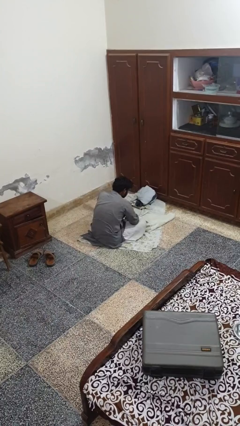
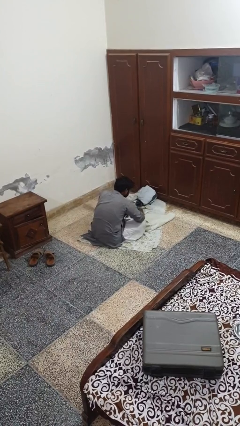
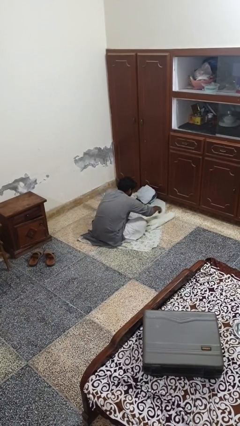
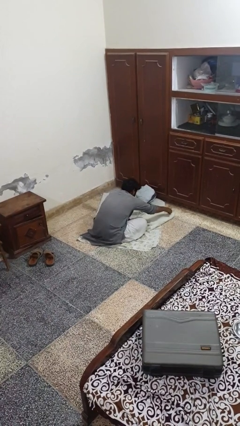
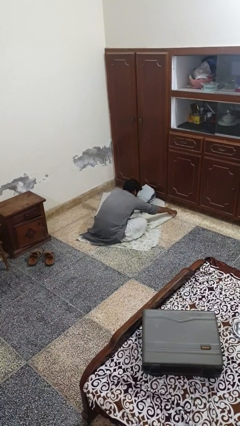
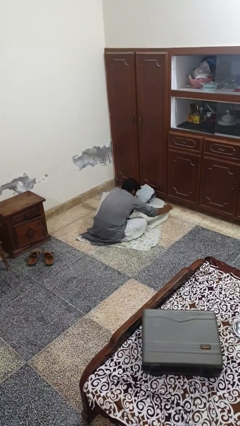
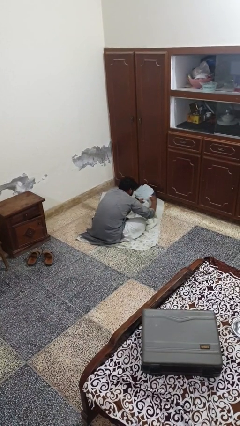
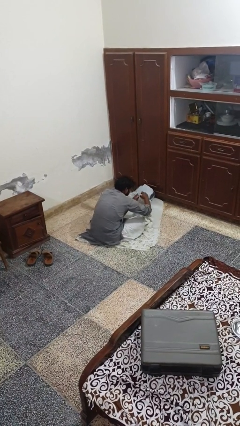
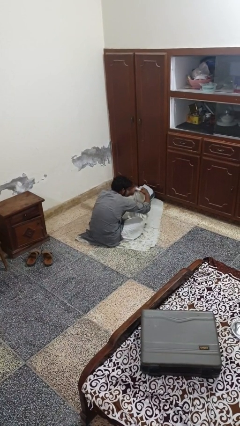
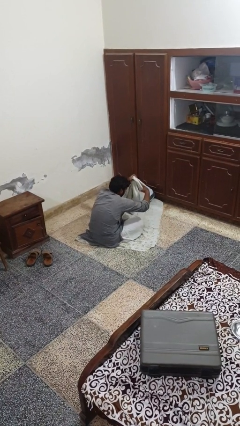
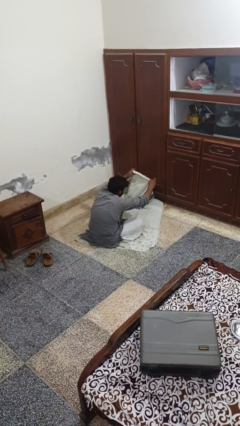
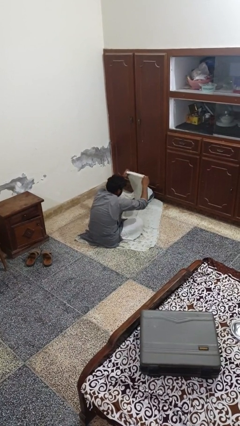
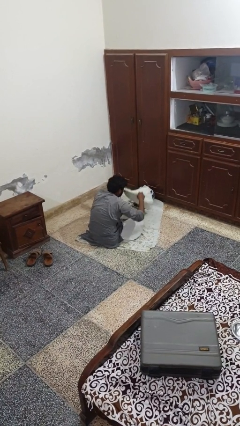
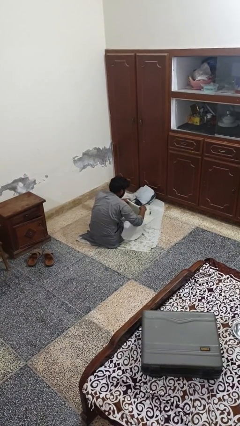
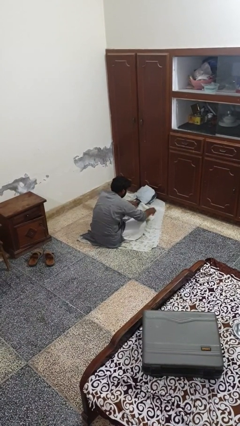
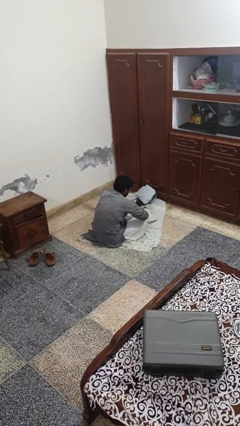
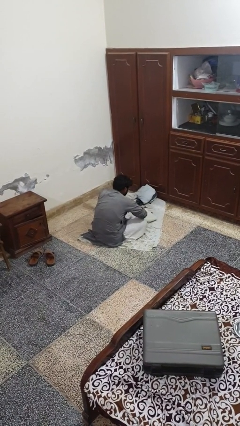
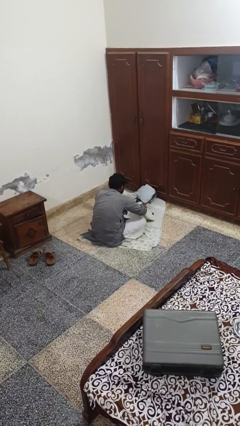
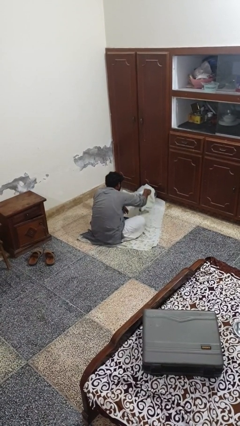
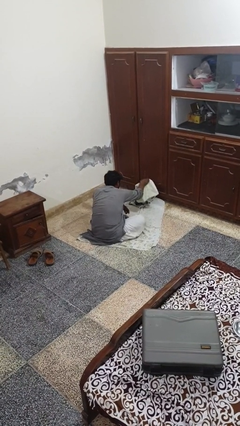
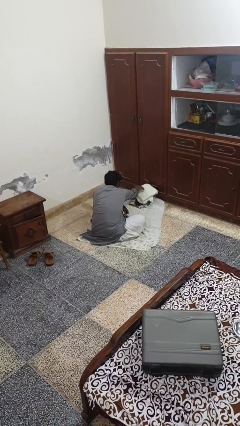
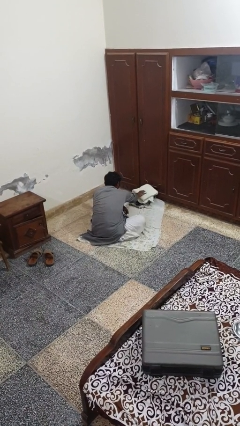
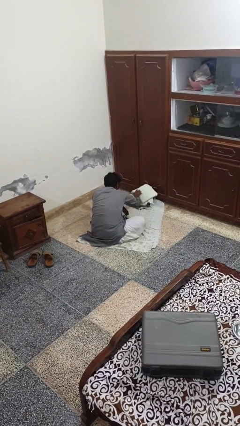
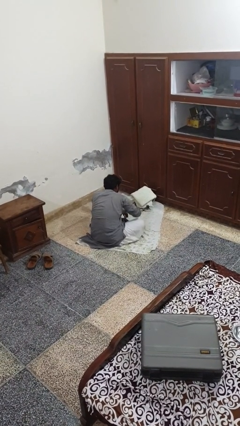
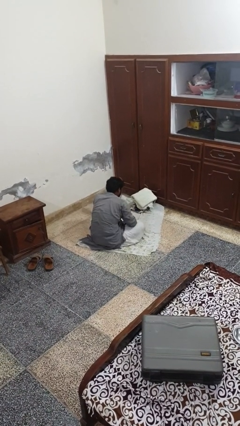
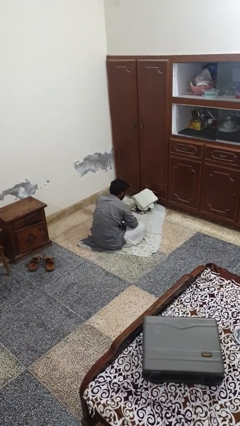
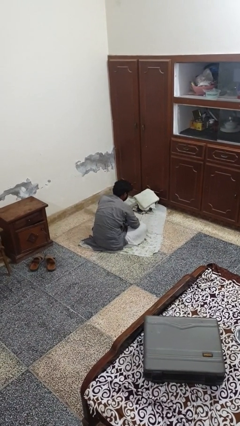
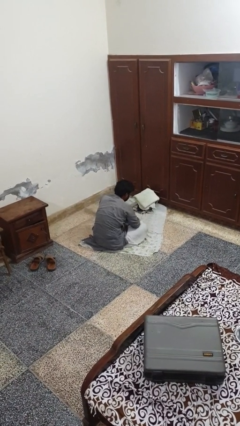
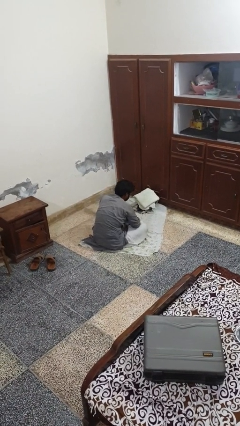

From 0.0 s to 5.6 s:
person folds towel

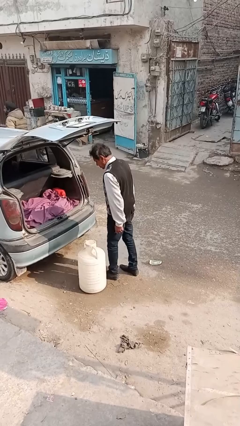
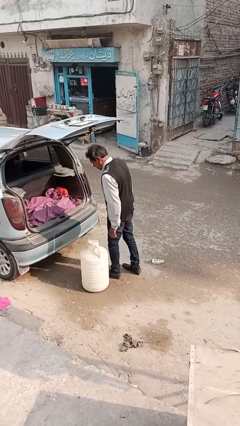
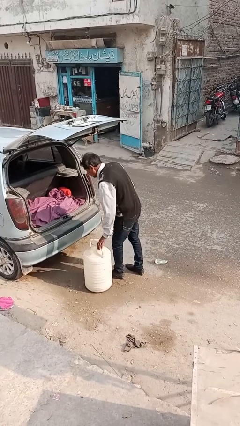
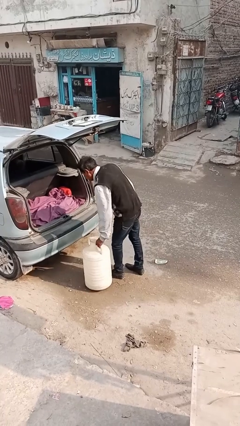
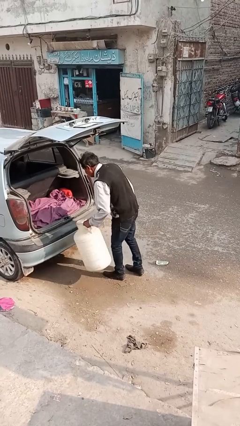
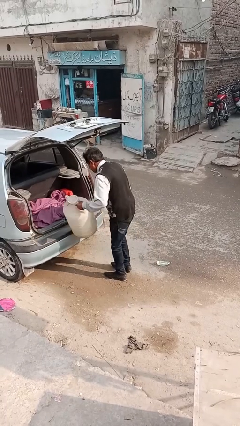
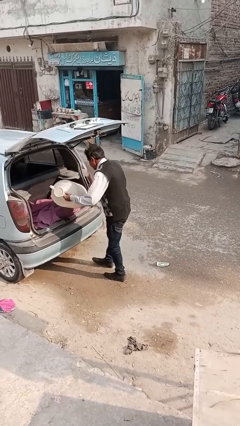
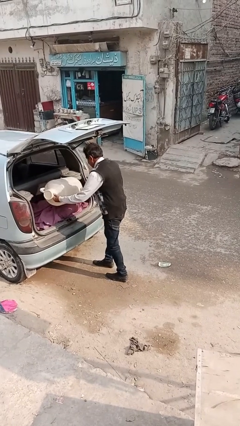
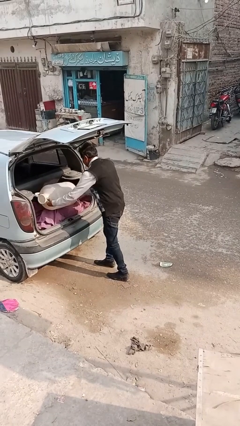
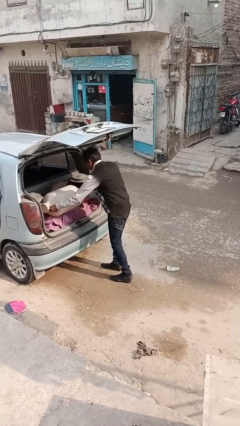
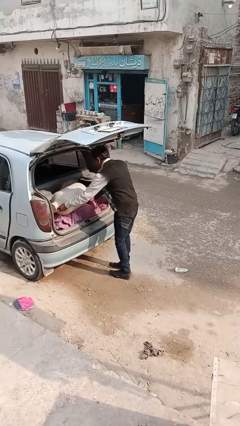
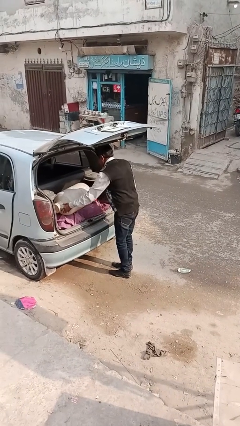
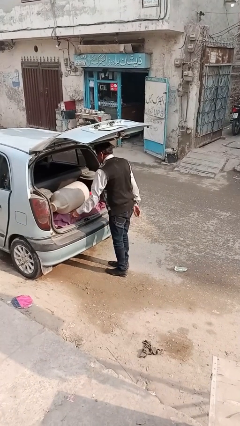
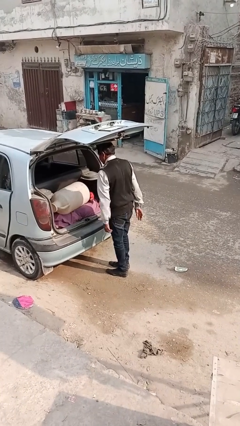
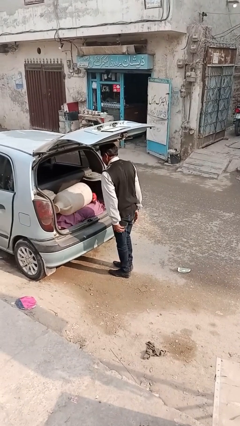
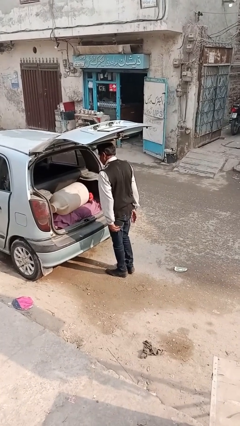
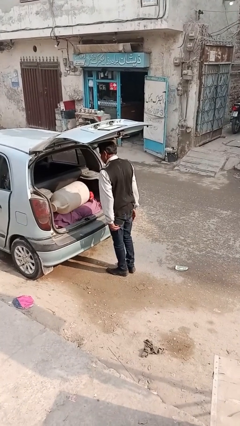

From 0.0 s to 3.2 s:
person loads car

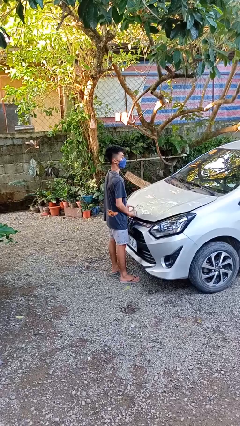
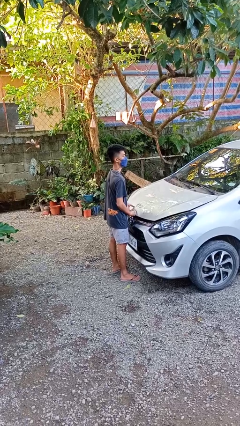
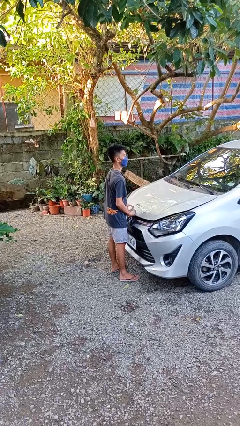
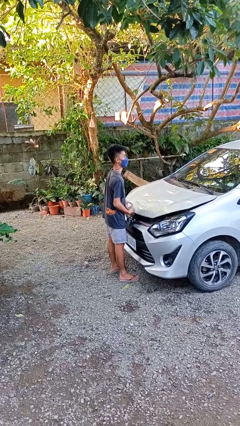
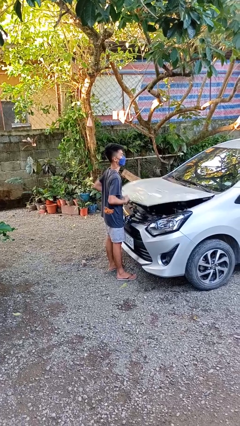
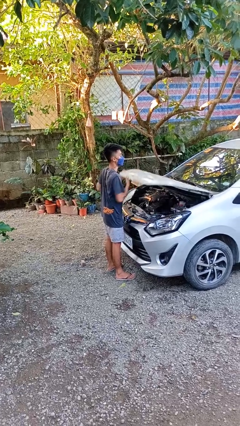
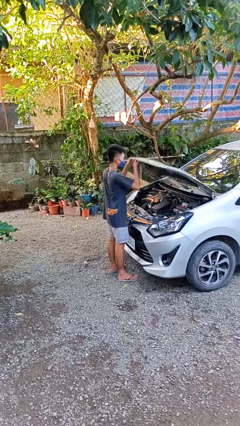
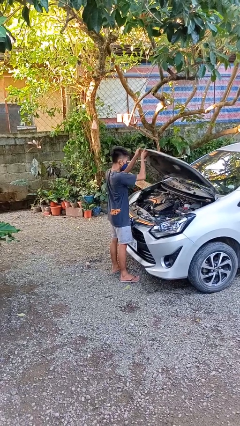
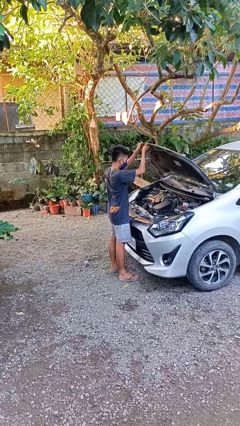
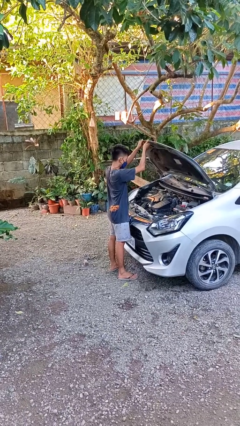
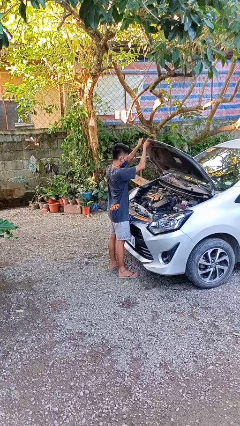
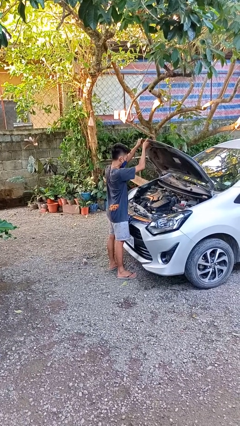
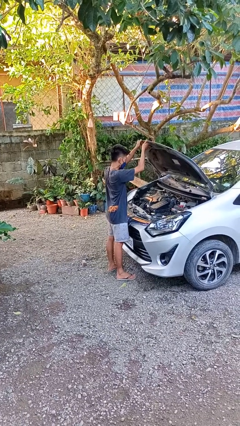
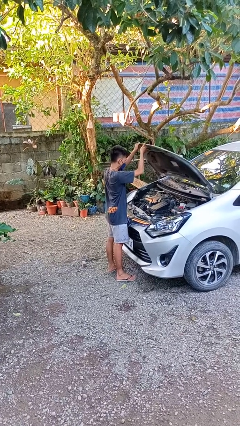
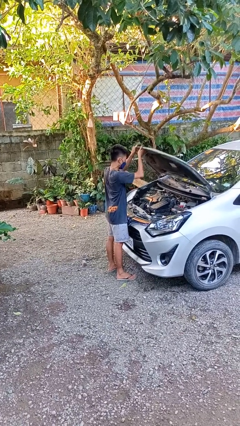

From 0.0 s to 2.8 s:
person opens car hood

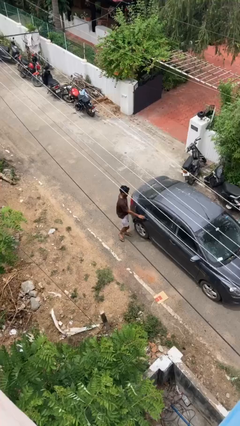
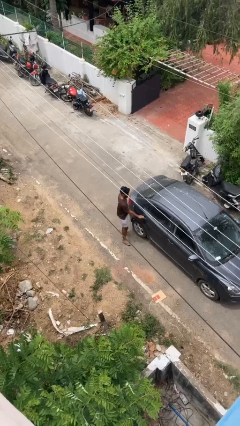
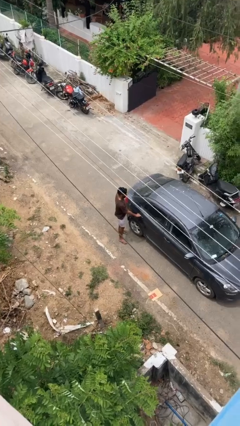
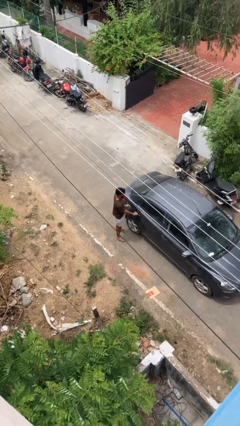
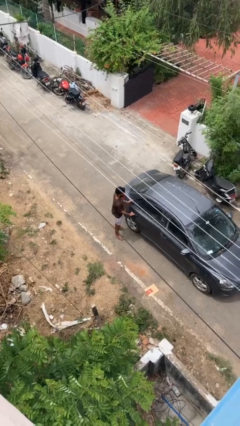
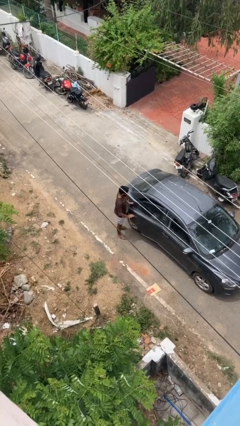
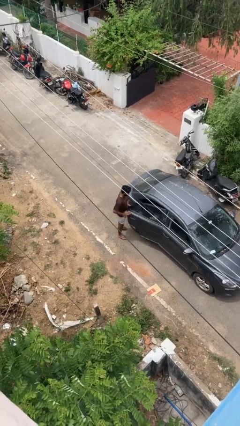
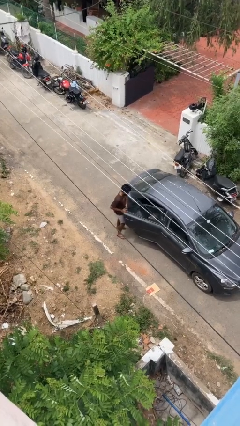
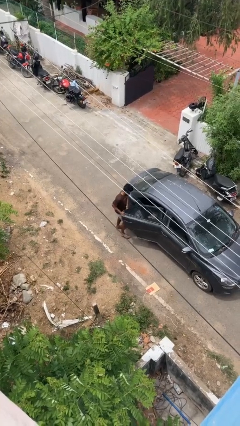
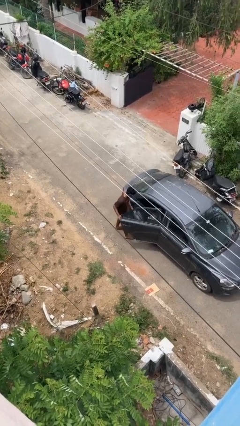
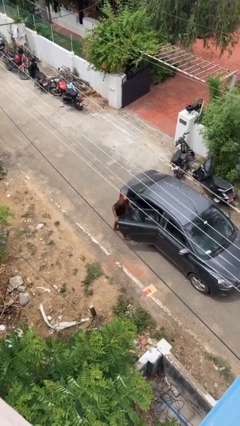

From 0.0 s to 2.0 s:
person opens car door

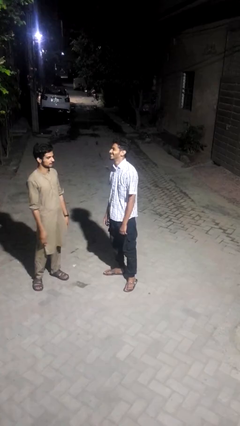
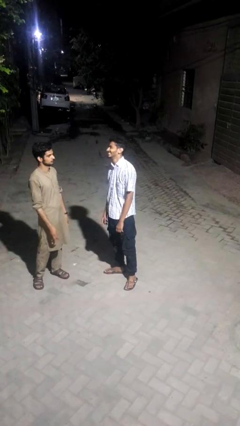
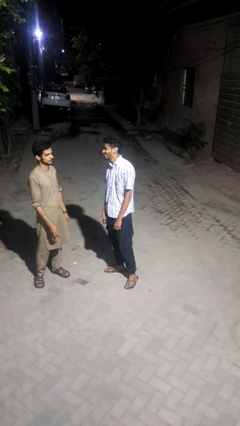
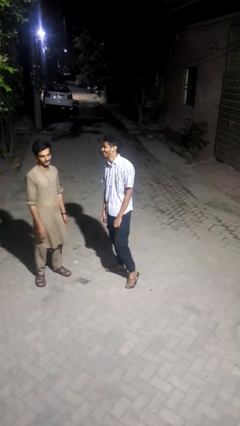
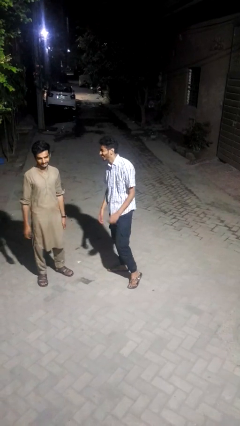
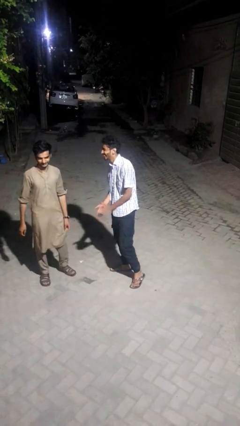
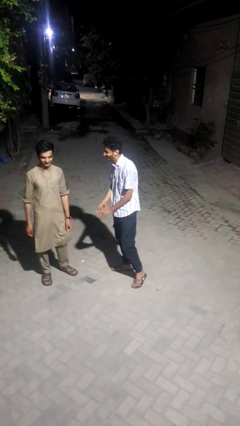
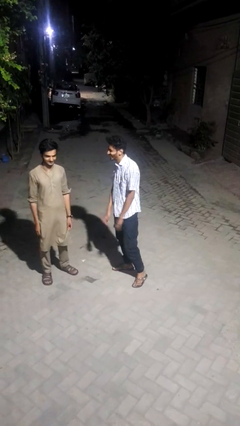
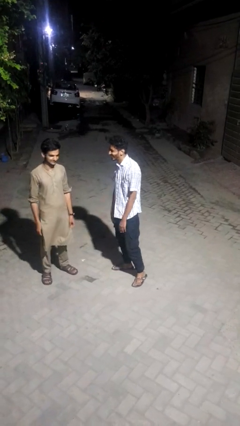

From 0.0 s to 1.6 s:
person laughs with person

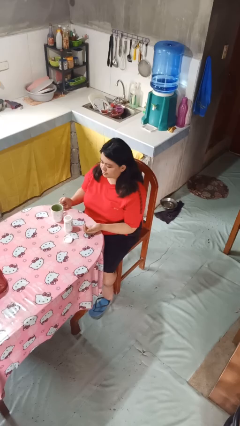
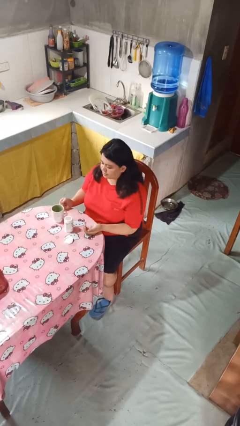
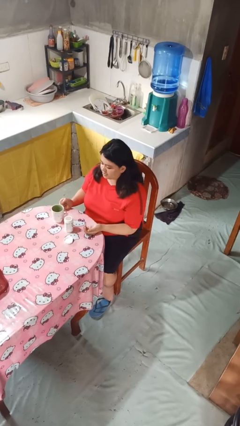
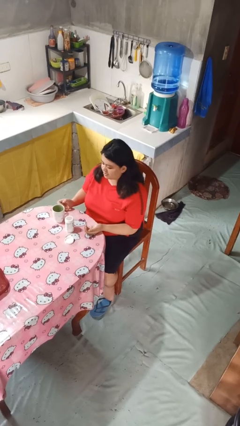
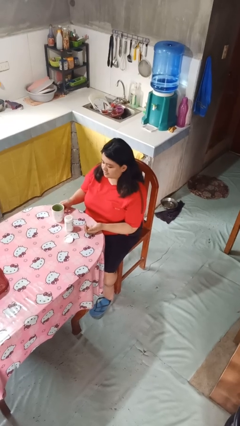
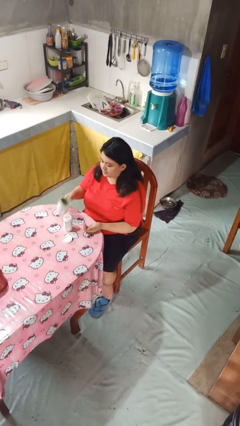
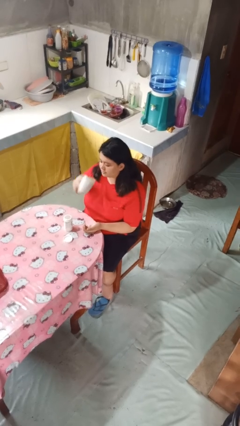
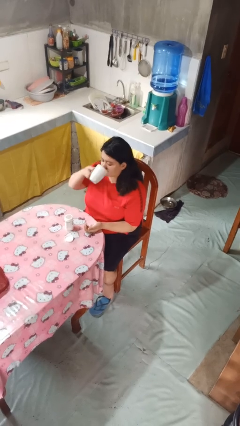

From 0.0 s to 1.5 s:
person drinks from cup

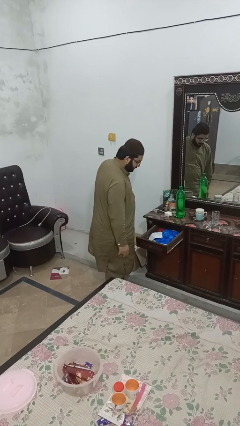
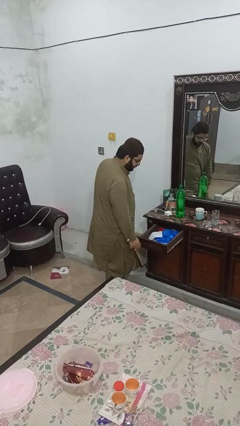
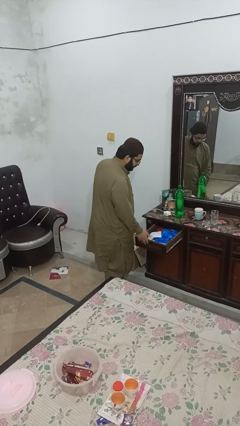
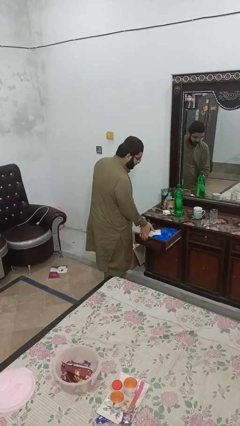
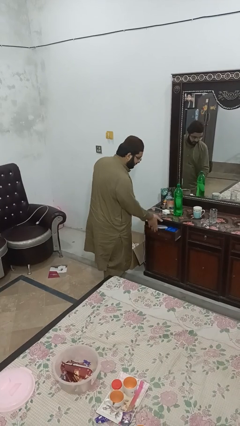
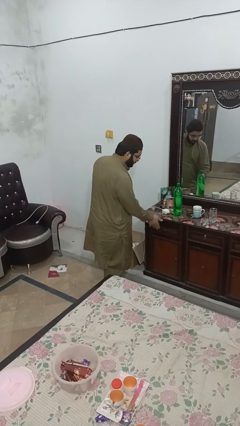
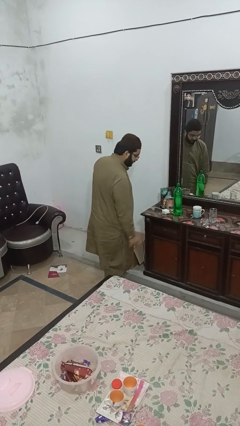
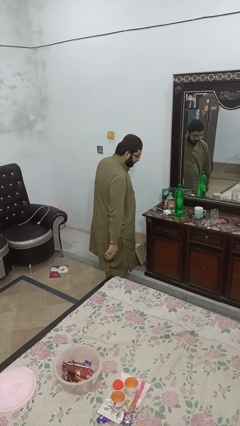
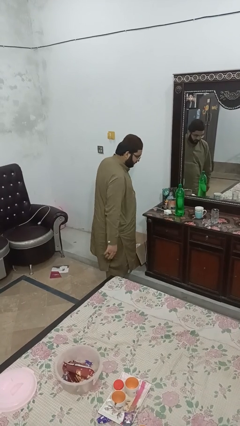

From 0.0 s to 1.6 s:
person closes dresser drawer
